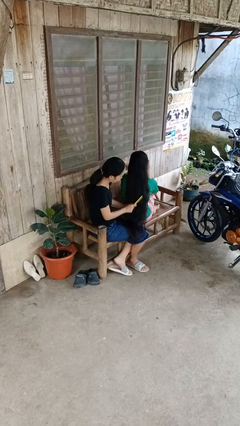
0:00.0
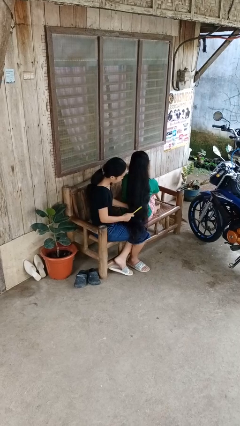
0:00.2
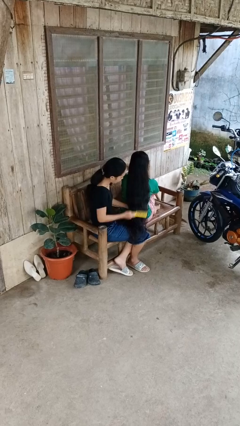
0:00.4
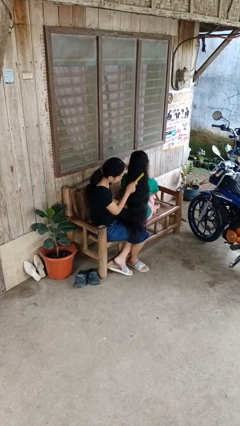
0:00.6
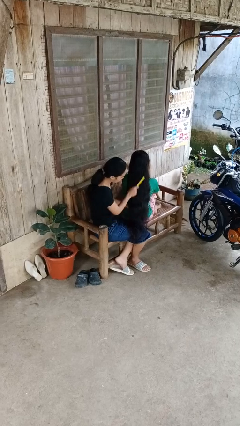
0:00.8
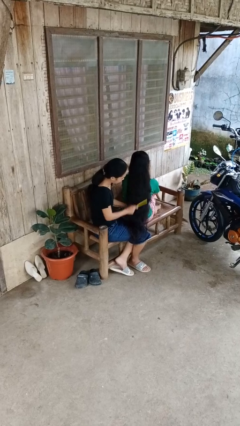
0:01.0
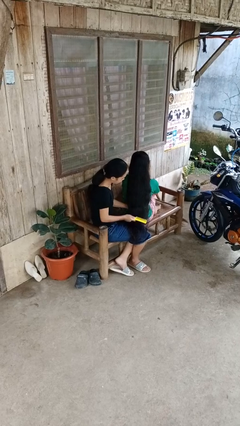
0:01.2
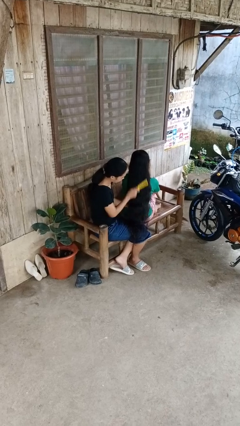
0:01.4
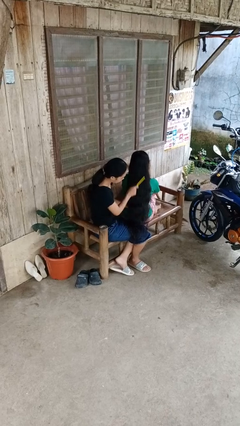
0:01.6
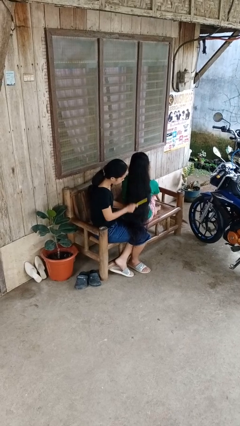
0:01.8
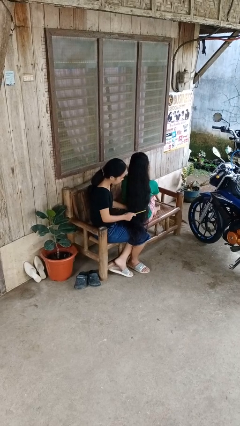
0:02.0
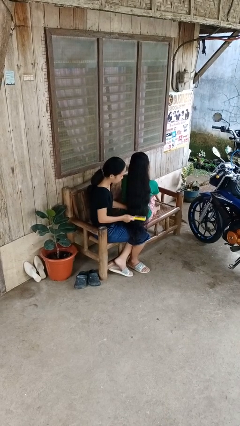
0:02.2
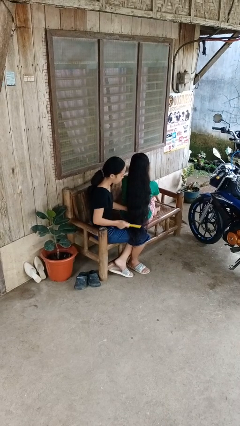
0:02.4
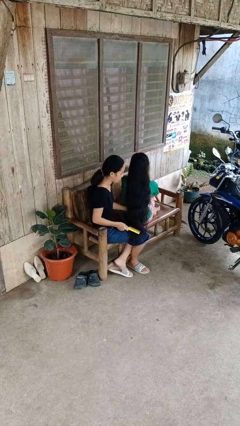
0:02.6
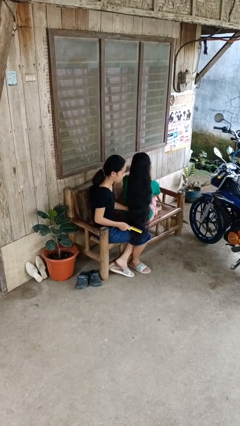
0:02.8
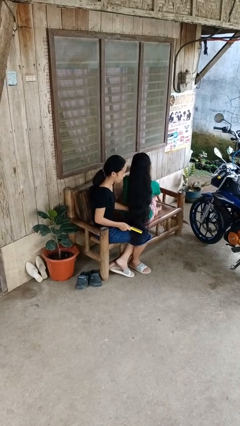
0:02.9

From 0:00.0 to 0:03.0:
person brushes hair of person

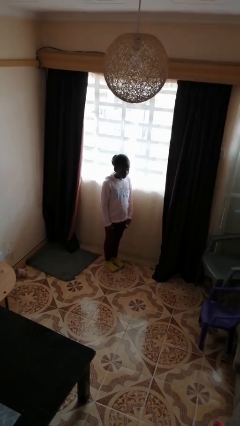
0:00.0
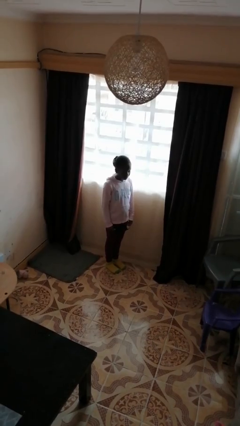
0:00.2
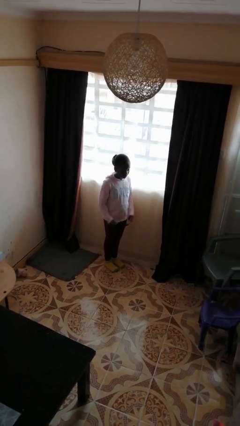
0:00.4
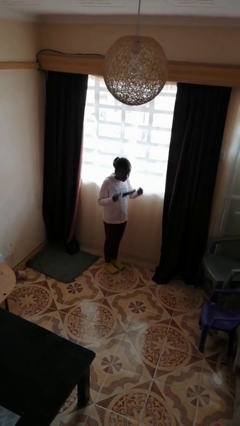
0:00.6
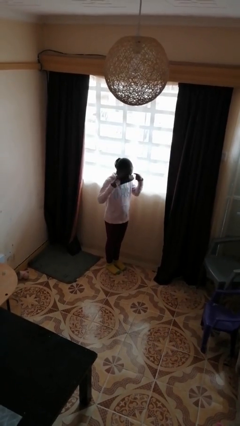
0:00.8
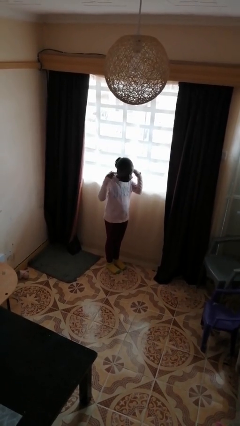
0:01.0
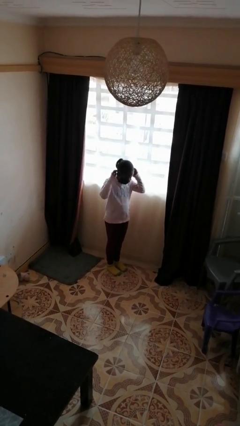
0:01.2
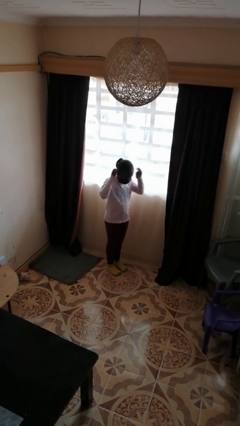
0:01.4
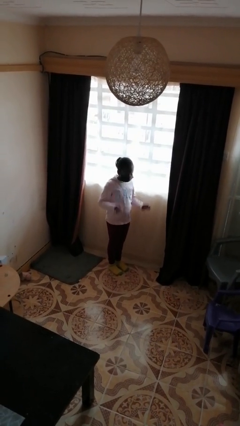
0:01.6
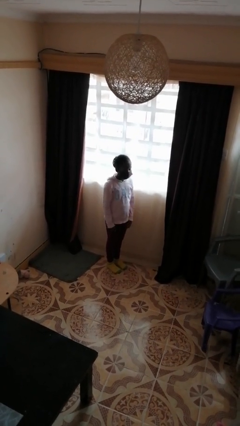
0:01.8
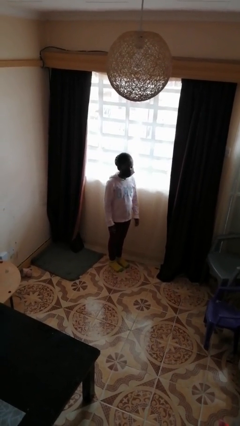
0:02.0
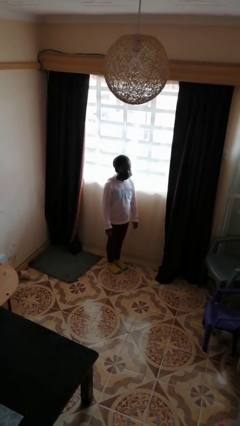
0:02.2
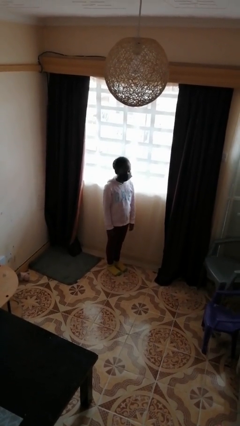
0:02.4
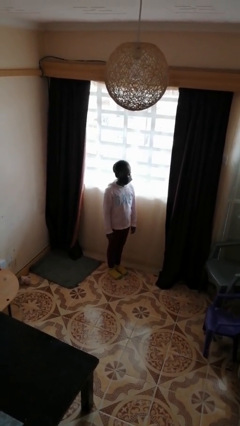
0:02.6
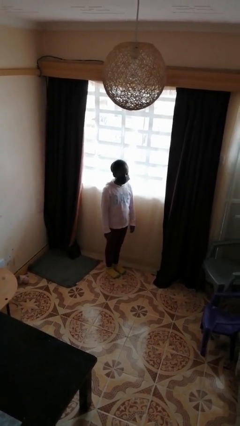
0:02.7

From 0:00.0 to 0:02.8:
person puts on facemask

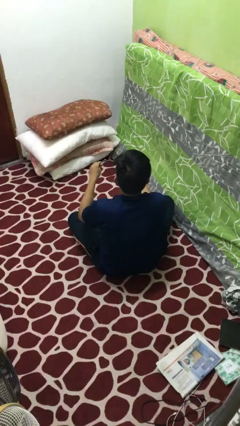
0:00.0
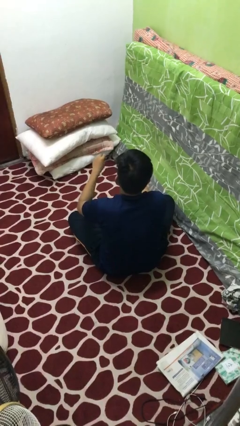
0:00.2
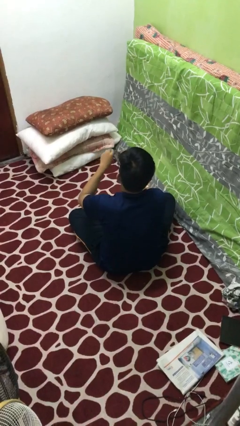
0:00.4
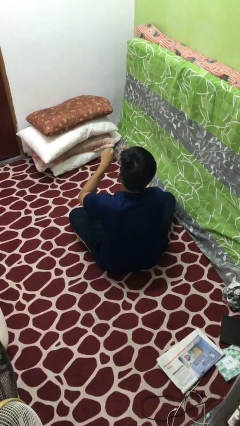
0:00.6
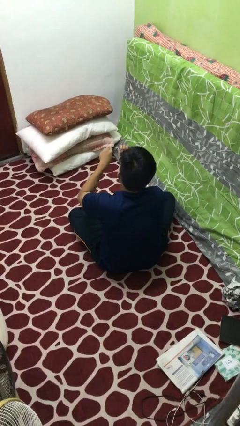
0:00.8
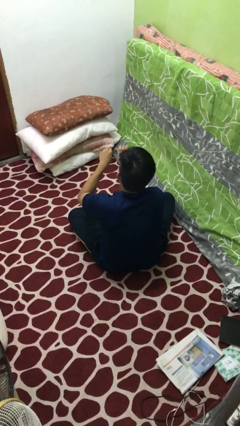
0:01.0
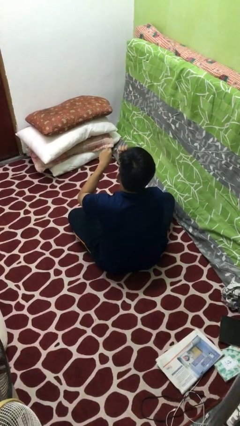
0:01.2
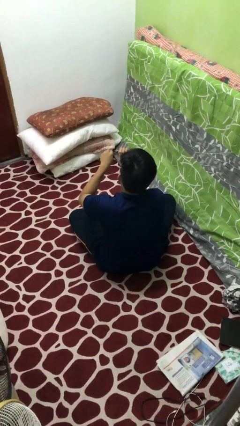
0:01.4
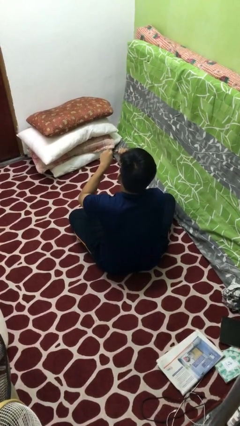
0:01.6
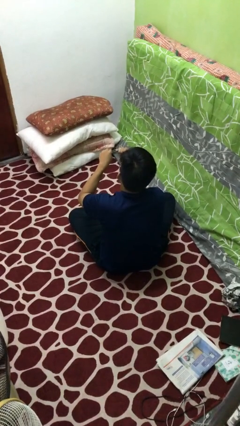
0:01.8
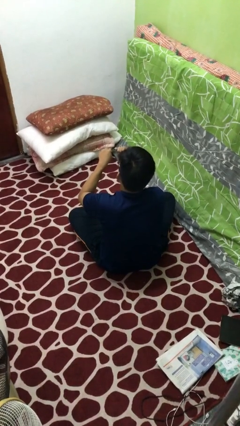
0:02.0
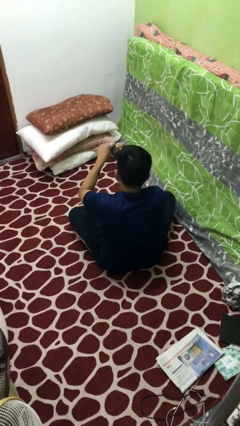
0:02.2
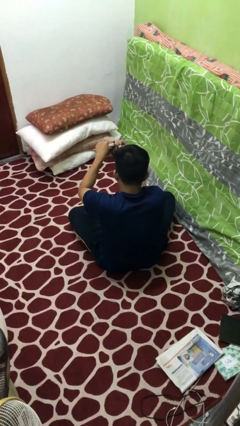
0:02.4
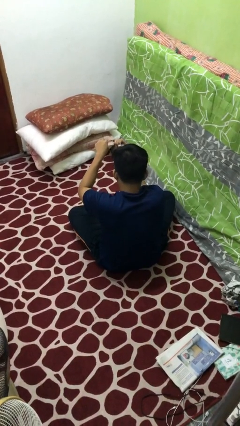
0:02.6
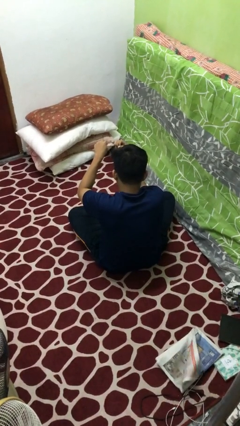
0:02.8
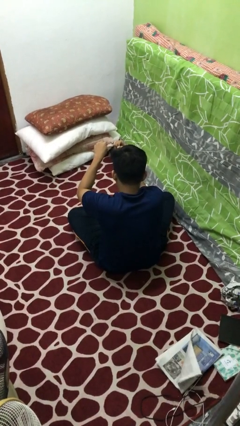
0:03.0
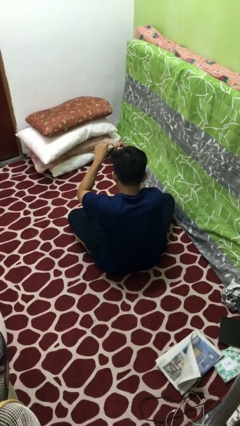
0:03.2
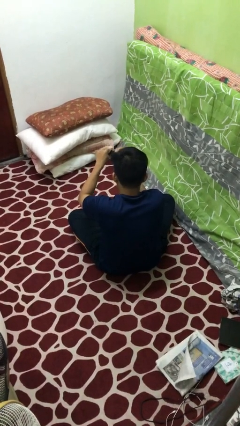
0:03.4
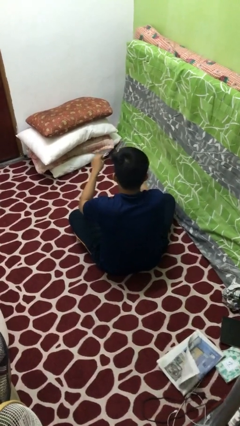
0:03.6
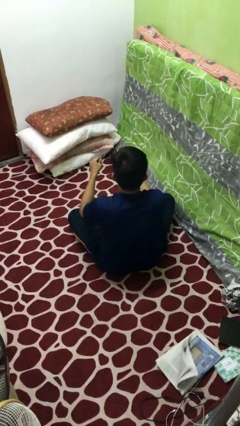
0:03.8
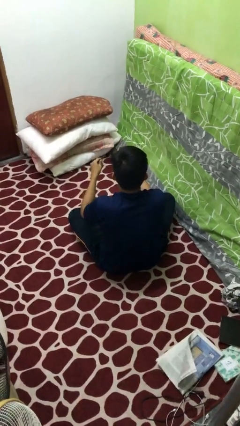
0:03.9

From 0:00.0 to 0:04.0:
person clips fingernails

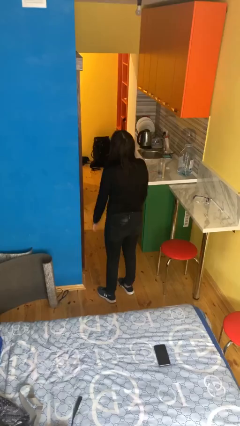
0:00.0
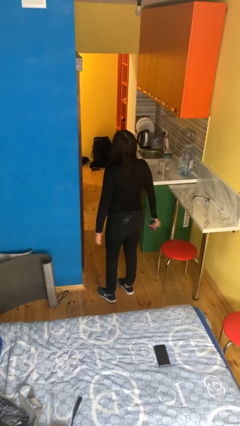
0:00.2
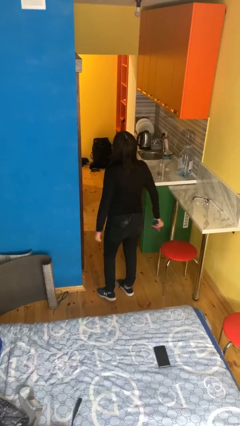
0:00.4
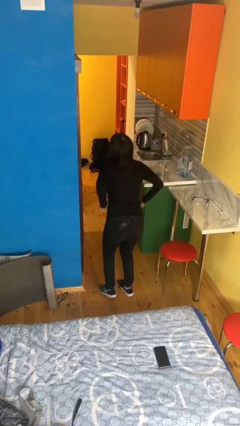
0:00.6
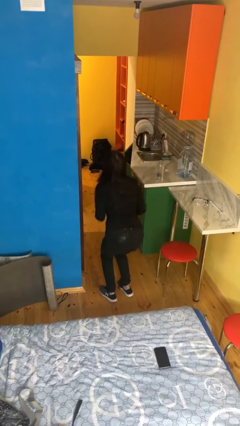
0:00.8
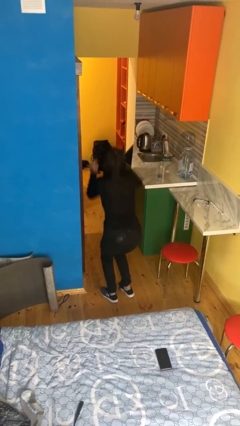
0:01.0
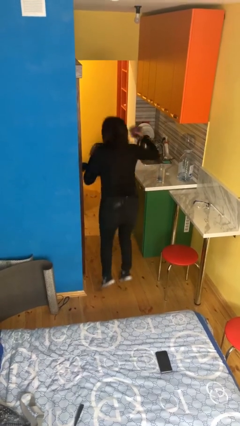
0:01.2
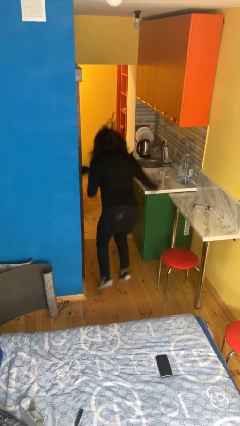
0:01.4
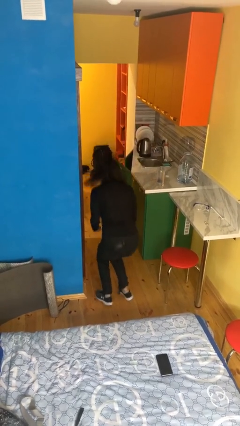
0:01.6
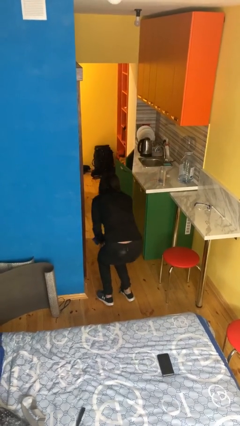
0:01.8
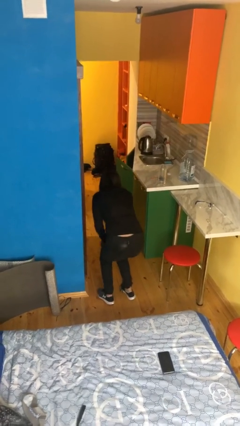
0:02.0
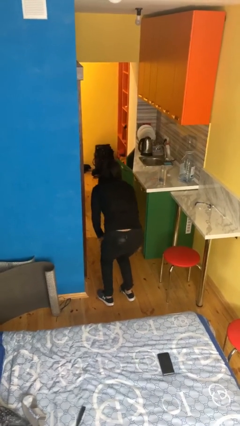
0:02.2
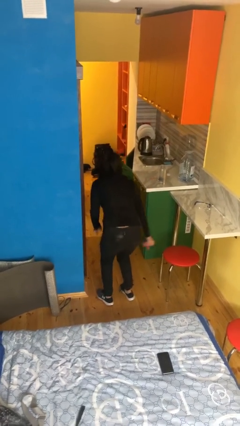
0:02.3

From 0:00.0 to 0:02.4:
person jumps

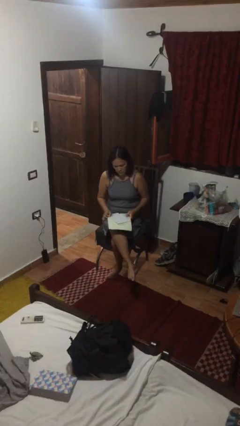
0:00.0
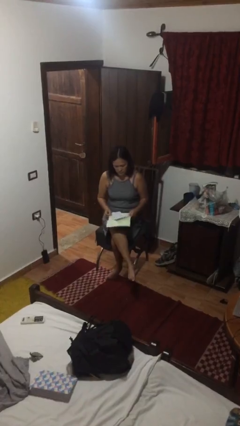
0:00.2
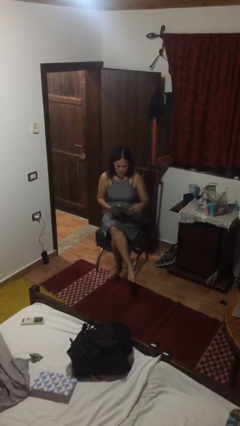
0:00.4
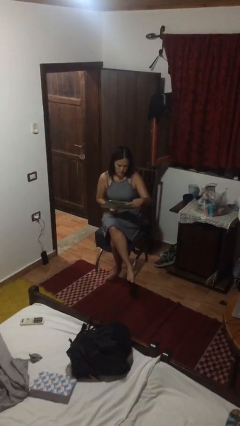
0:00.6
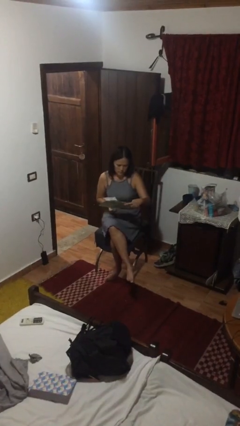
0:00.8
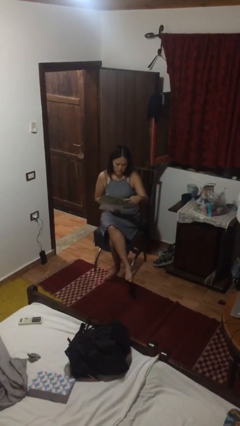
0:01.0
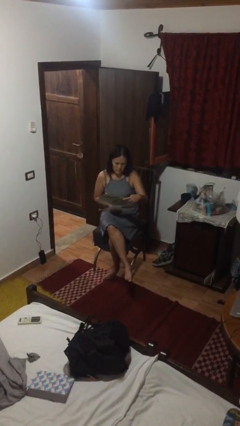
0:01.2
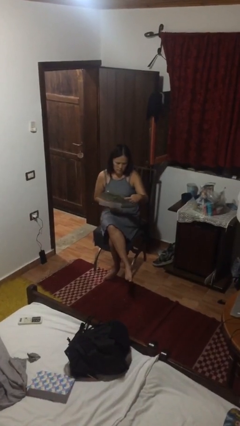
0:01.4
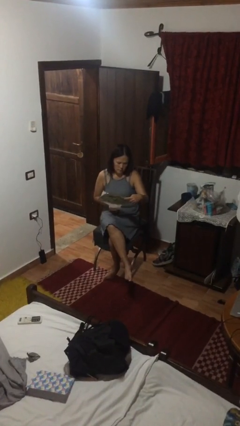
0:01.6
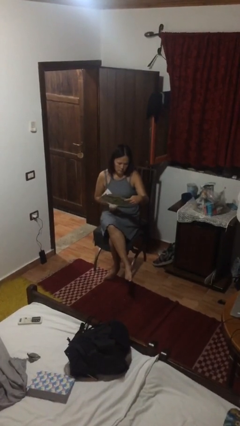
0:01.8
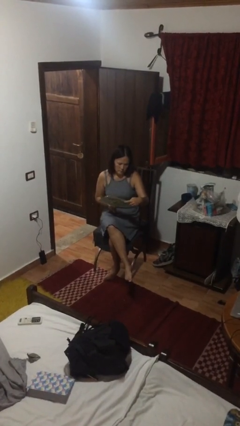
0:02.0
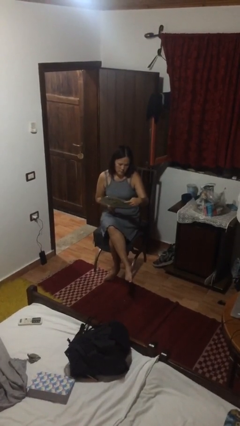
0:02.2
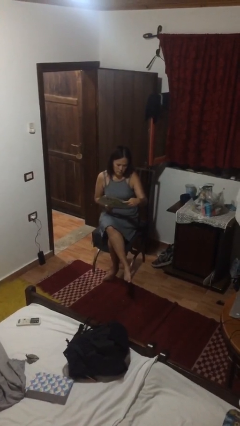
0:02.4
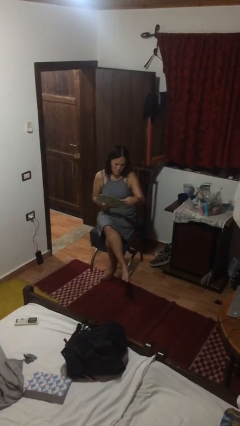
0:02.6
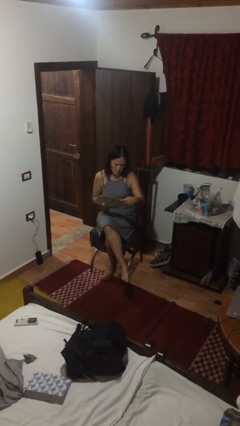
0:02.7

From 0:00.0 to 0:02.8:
person reads newspaper

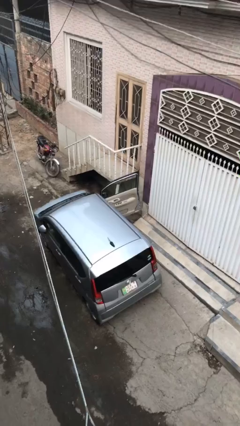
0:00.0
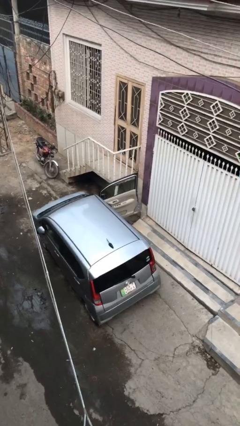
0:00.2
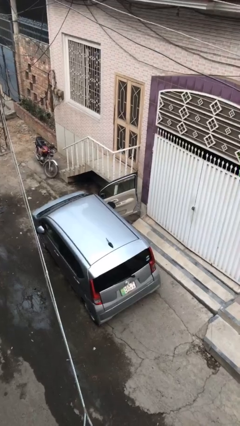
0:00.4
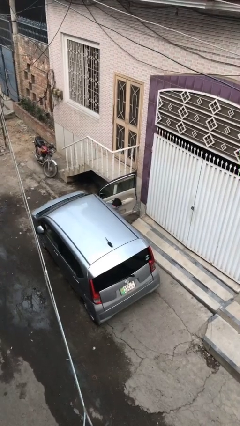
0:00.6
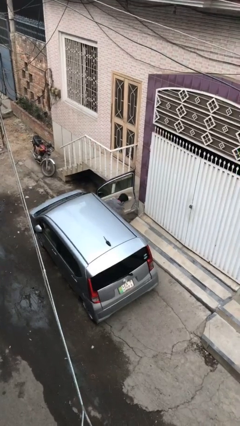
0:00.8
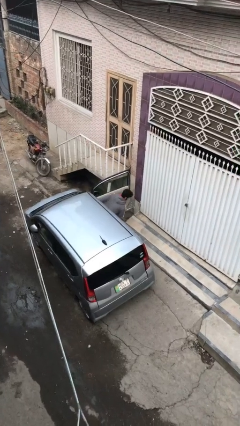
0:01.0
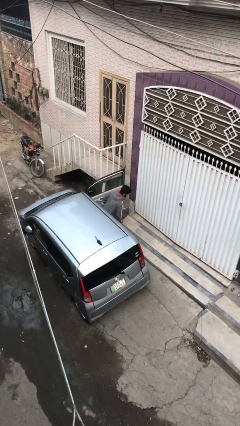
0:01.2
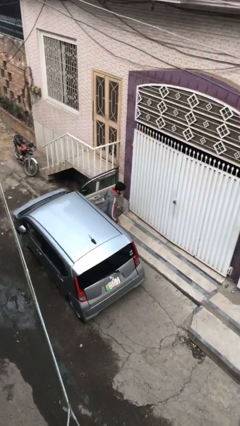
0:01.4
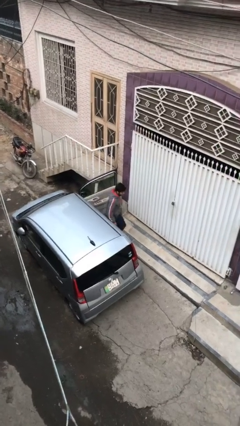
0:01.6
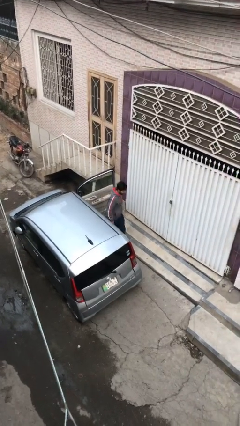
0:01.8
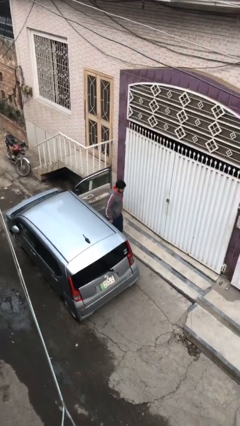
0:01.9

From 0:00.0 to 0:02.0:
person exits car

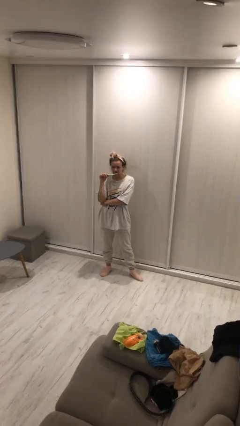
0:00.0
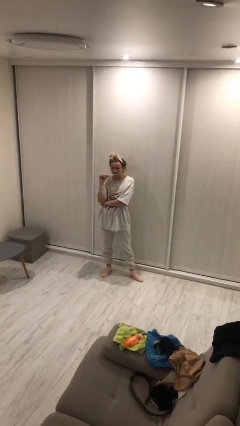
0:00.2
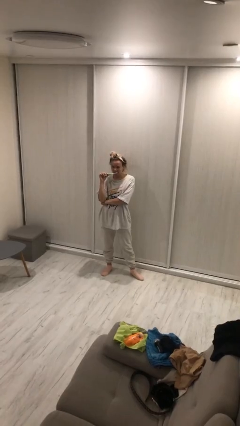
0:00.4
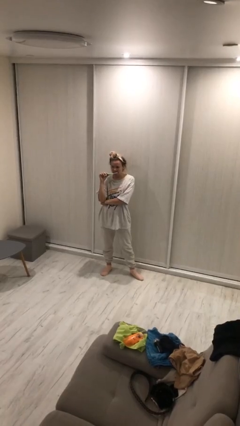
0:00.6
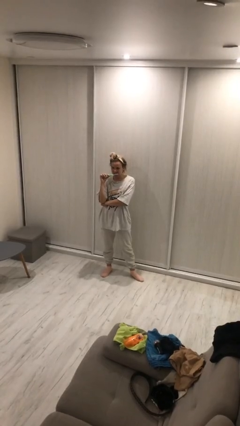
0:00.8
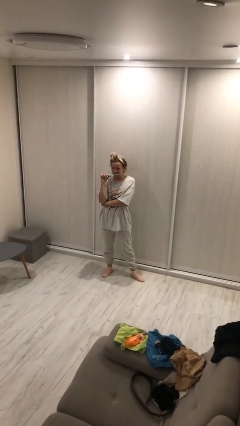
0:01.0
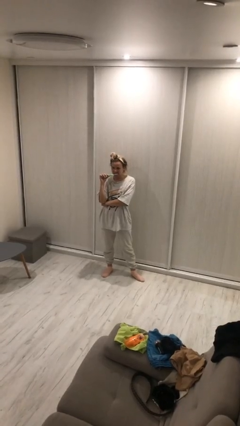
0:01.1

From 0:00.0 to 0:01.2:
person brushes teeth
